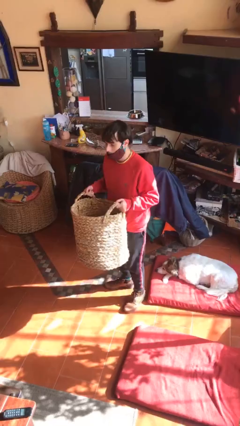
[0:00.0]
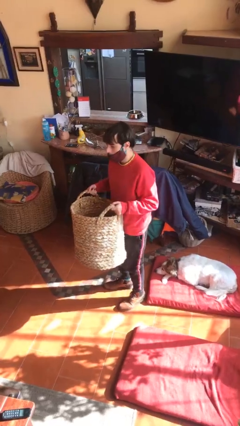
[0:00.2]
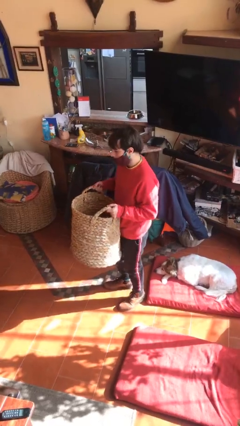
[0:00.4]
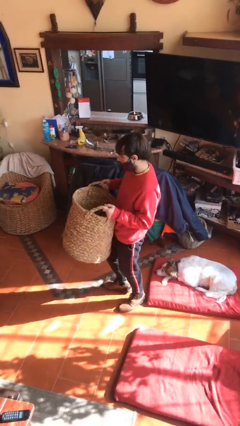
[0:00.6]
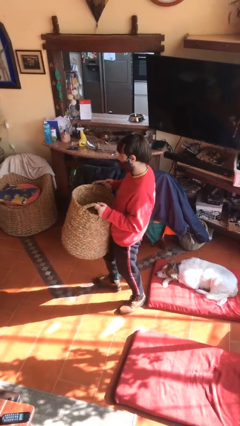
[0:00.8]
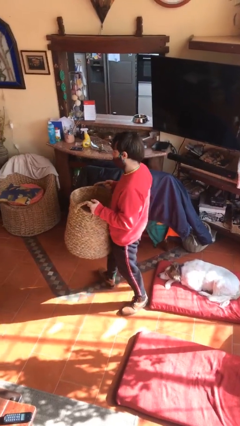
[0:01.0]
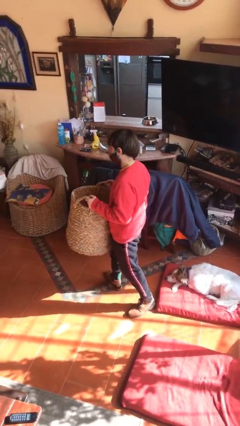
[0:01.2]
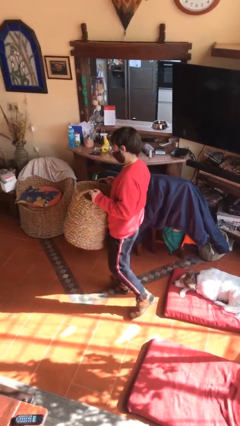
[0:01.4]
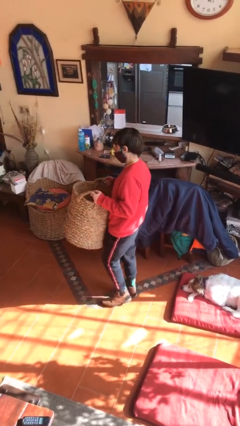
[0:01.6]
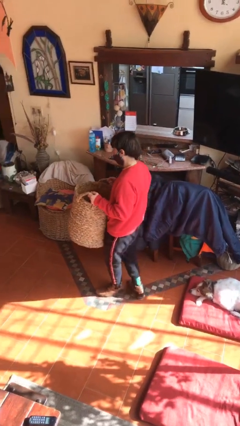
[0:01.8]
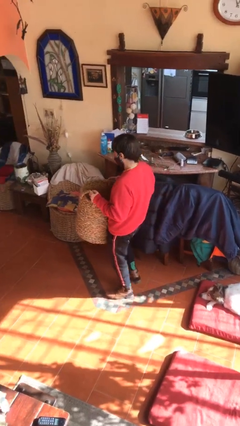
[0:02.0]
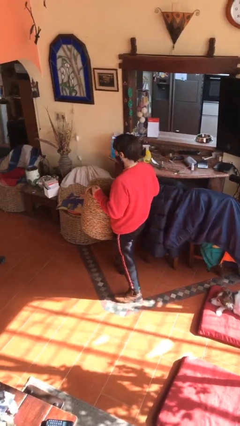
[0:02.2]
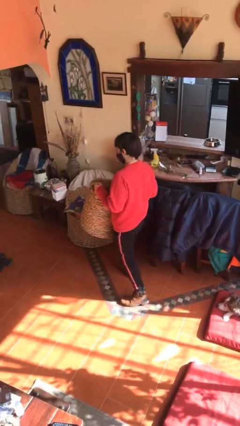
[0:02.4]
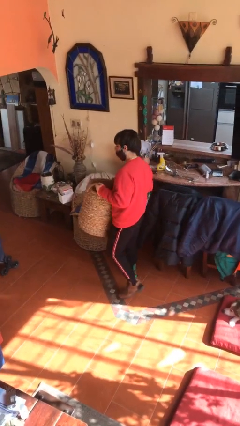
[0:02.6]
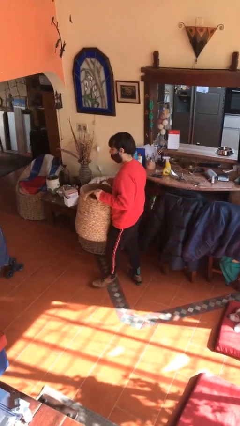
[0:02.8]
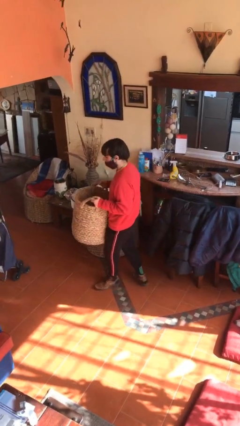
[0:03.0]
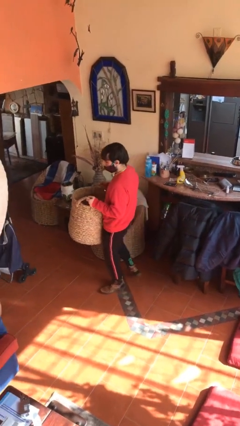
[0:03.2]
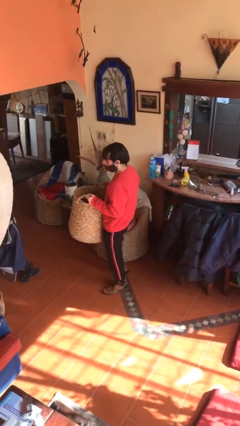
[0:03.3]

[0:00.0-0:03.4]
person carries laundry basket

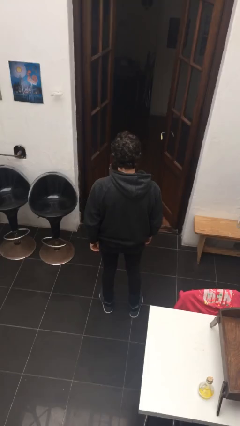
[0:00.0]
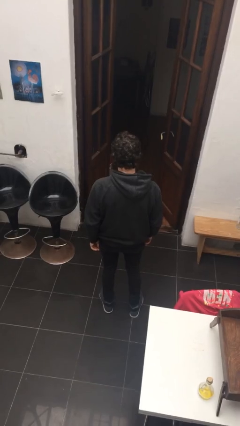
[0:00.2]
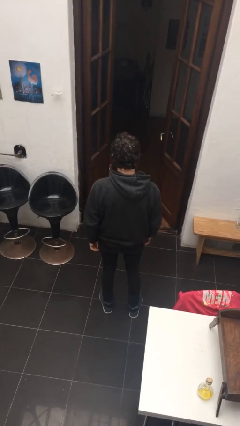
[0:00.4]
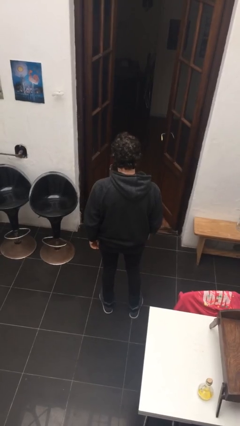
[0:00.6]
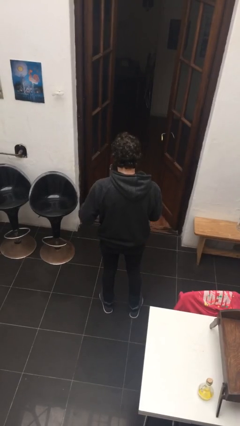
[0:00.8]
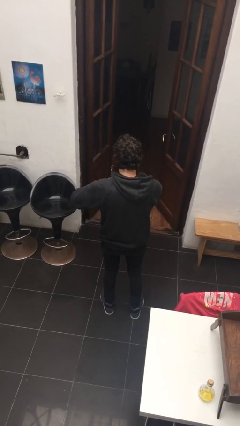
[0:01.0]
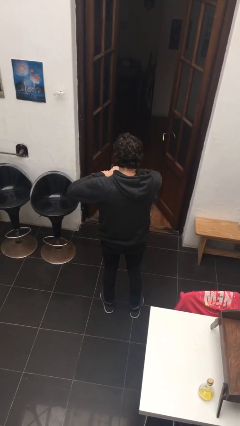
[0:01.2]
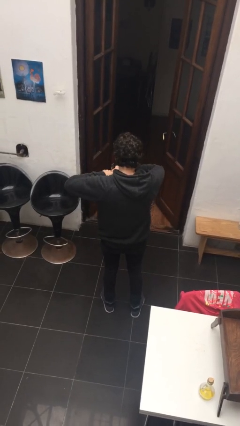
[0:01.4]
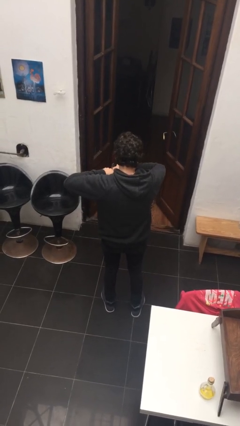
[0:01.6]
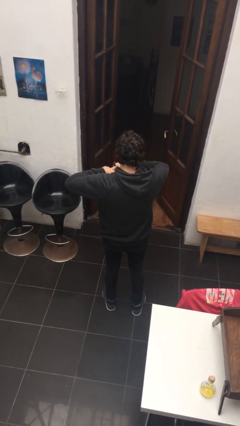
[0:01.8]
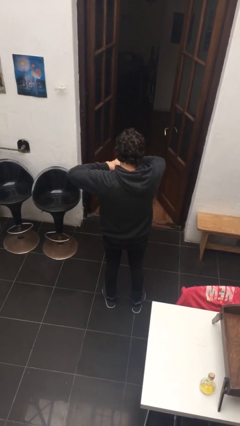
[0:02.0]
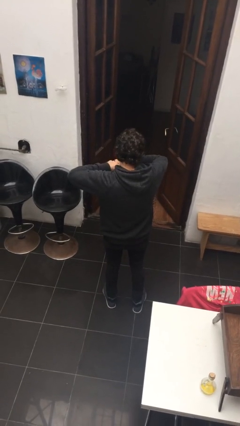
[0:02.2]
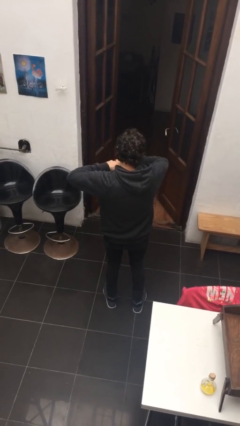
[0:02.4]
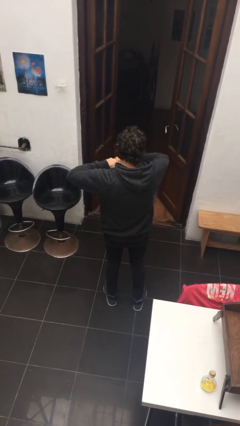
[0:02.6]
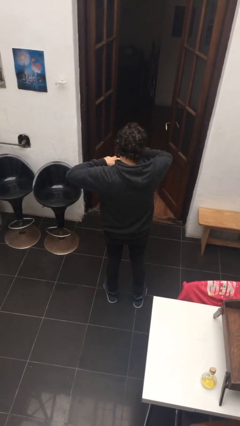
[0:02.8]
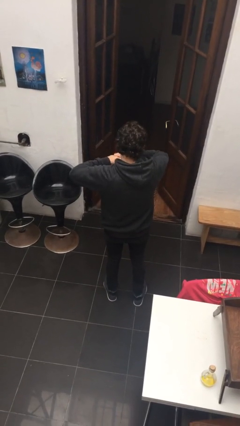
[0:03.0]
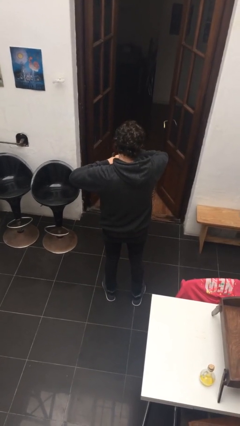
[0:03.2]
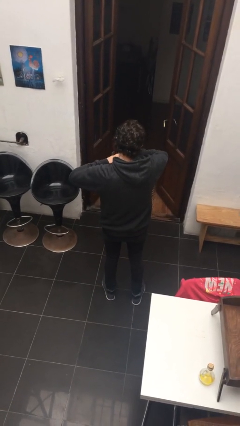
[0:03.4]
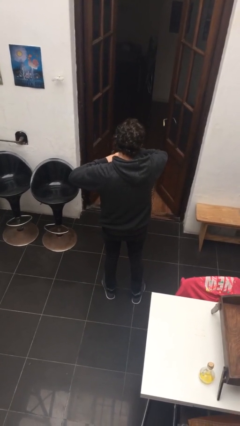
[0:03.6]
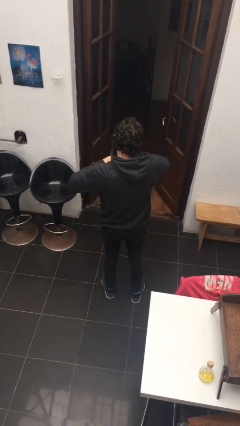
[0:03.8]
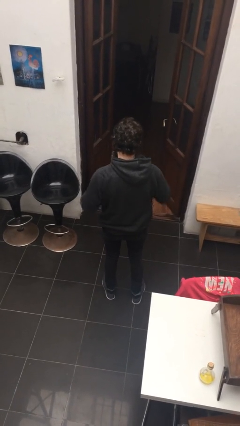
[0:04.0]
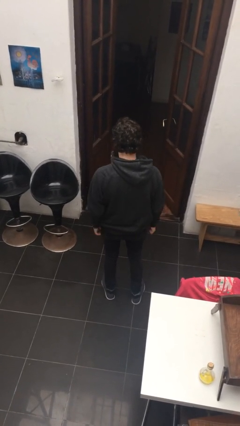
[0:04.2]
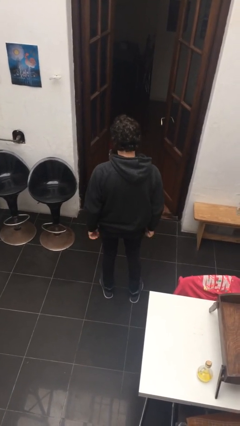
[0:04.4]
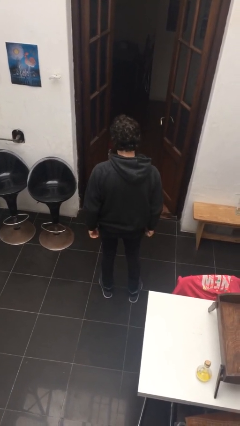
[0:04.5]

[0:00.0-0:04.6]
person cracks knuckles

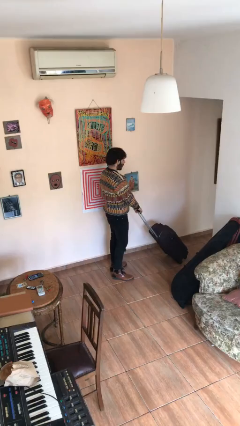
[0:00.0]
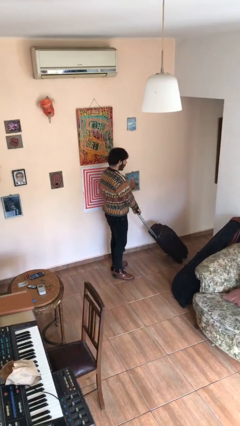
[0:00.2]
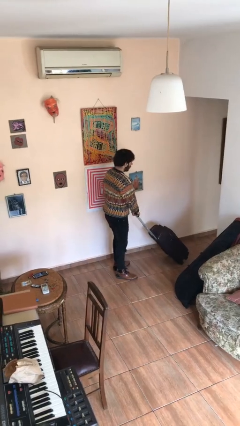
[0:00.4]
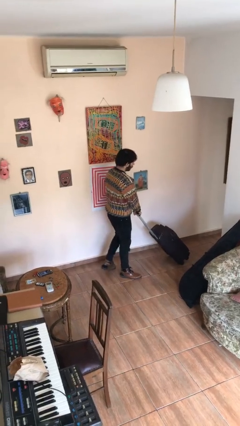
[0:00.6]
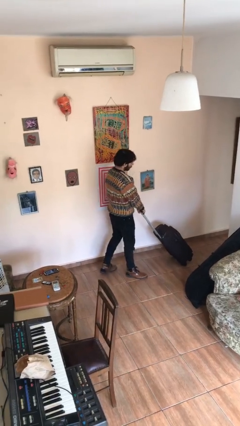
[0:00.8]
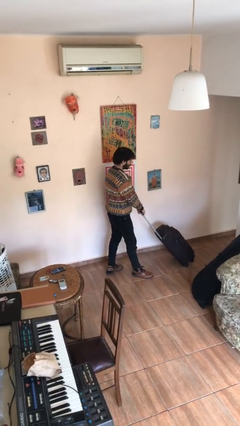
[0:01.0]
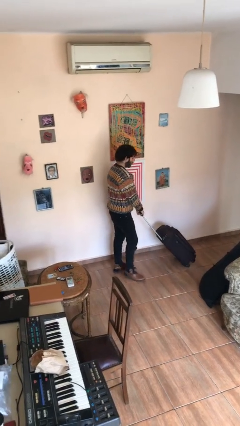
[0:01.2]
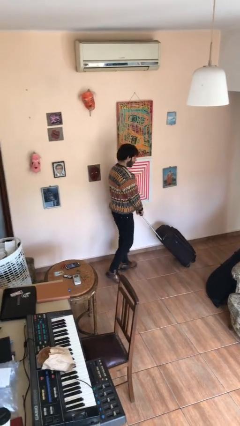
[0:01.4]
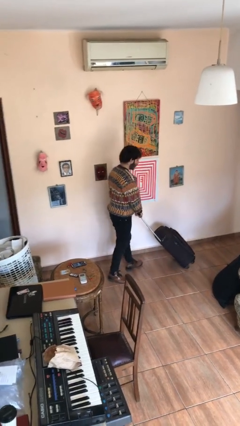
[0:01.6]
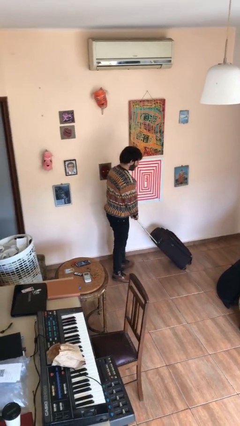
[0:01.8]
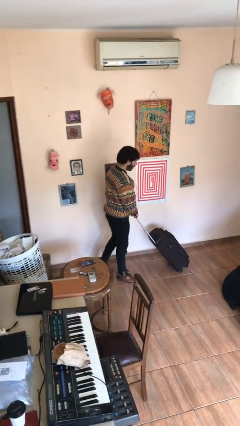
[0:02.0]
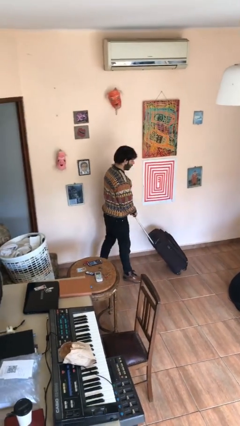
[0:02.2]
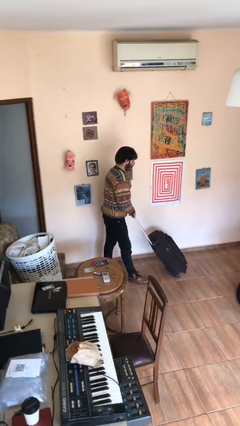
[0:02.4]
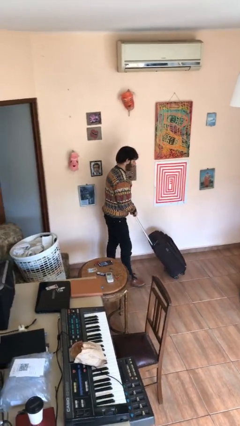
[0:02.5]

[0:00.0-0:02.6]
person pulls wheeled cart

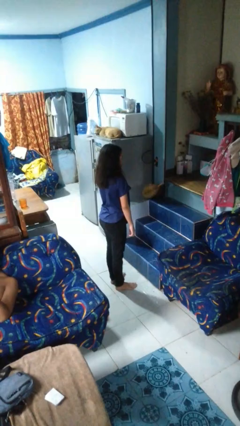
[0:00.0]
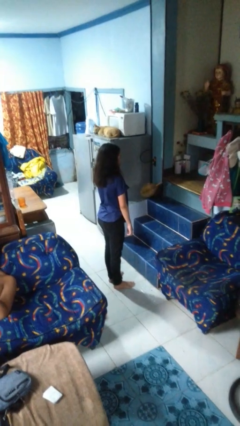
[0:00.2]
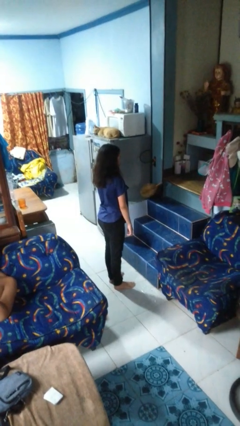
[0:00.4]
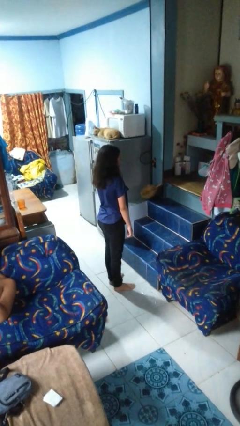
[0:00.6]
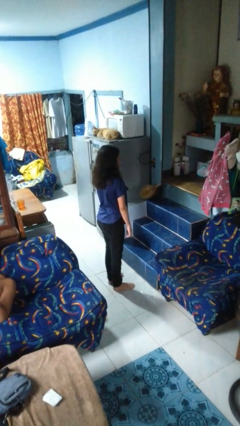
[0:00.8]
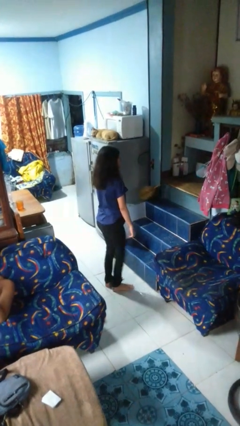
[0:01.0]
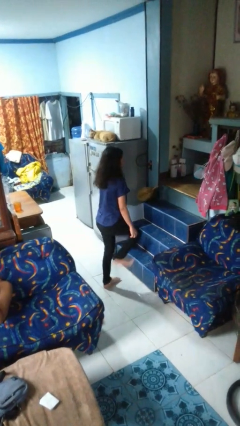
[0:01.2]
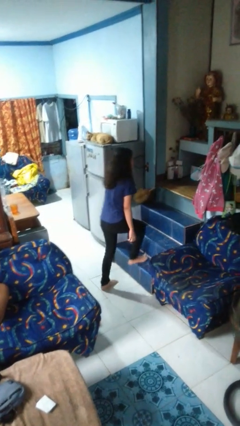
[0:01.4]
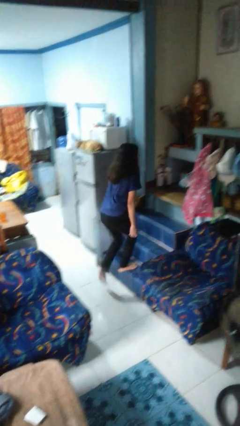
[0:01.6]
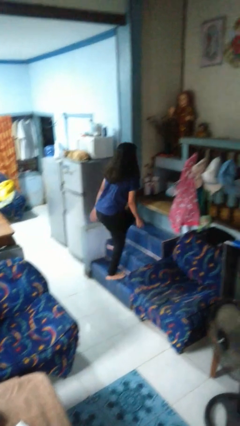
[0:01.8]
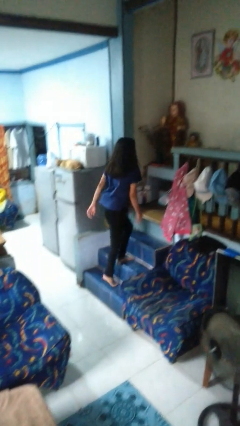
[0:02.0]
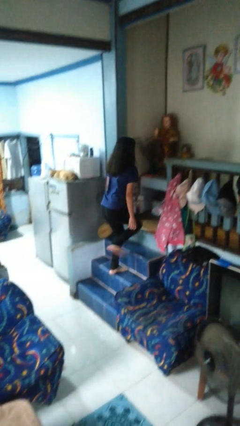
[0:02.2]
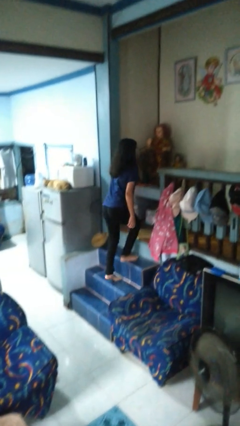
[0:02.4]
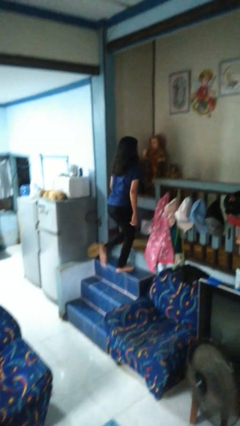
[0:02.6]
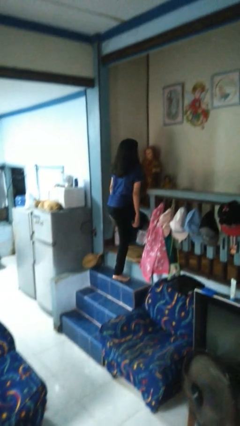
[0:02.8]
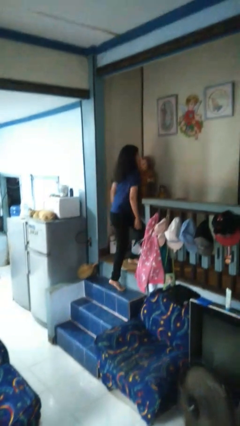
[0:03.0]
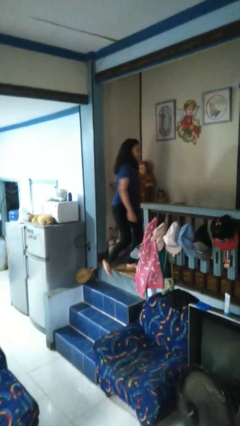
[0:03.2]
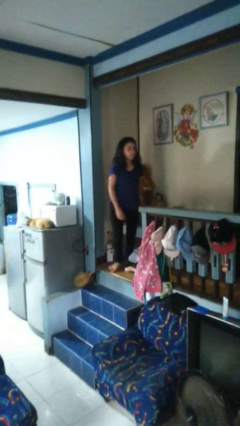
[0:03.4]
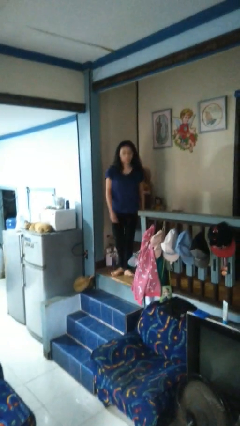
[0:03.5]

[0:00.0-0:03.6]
person climbs up stairs

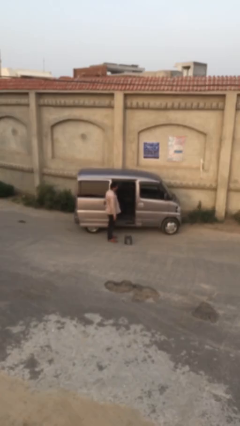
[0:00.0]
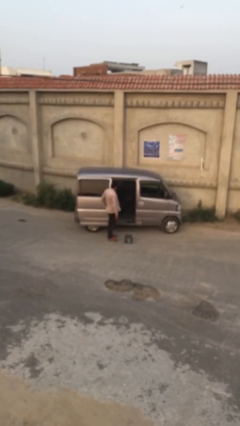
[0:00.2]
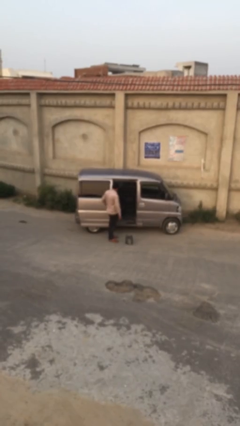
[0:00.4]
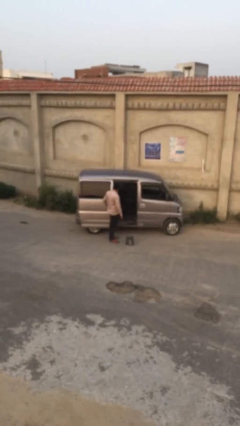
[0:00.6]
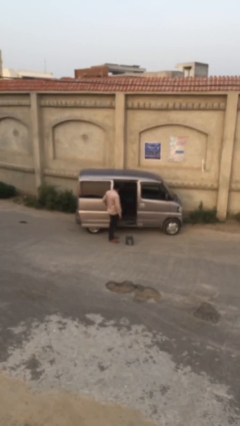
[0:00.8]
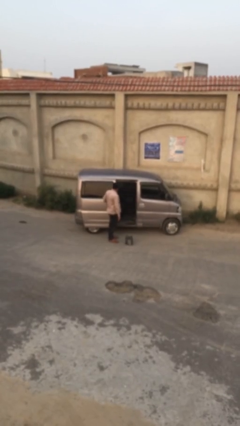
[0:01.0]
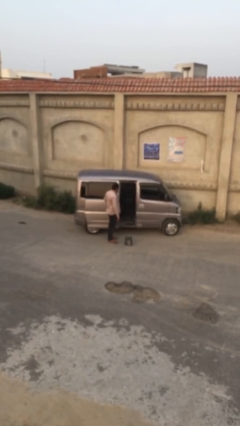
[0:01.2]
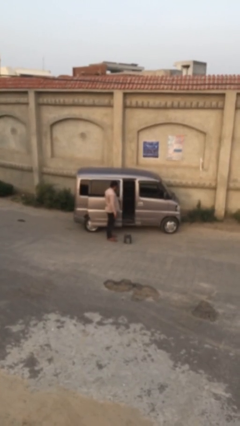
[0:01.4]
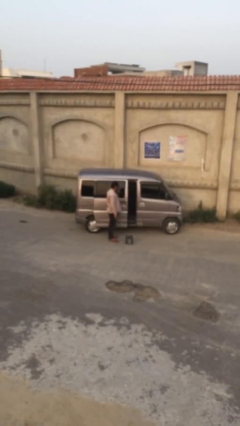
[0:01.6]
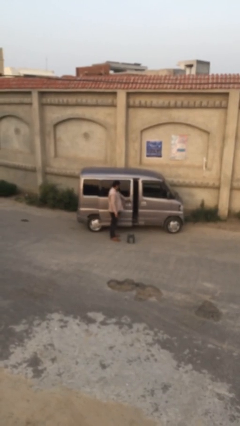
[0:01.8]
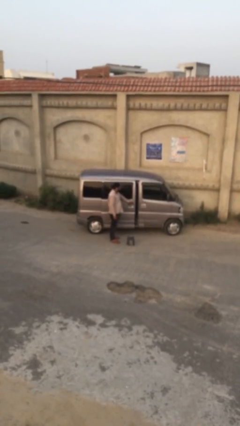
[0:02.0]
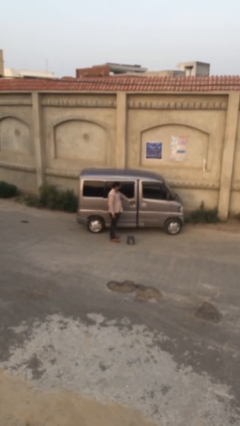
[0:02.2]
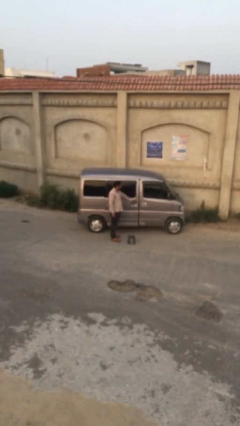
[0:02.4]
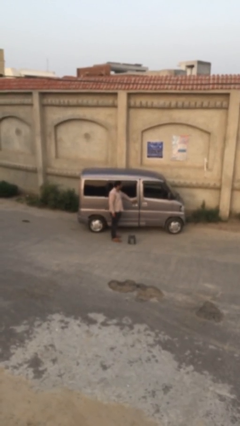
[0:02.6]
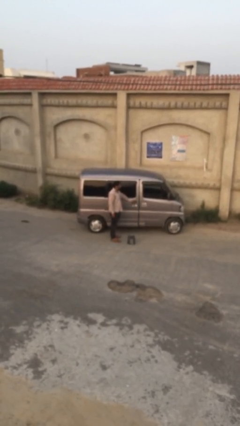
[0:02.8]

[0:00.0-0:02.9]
person closes car door

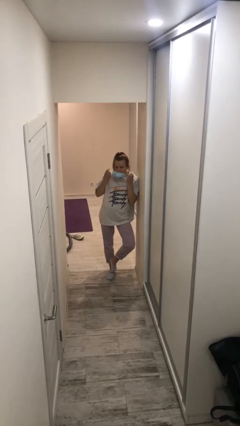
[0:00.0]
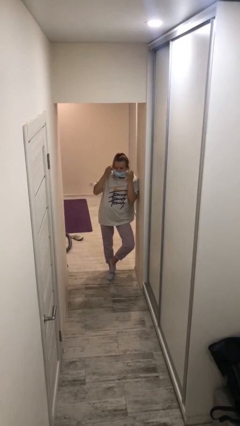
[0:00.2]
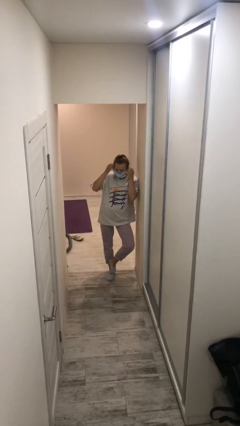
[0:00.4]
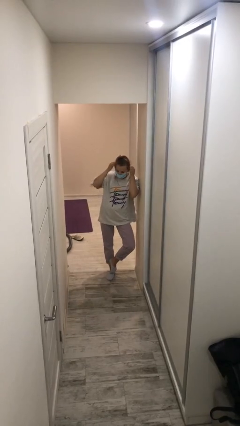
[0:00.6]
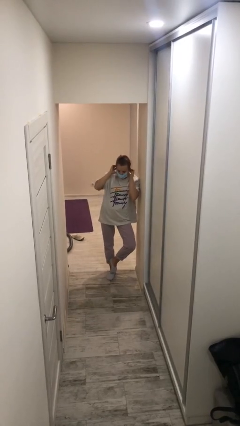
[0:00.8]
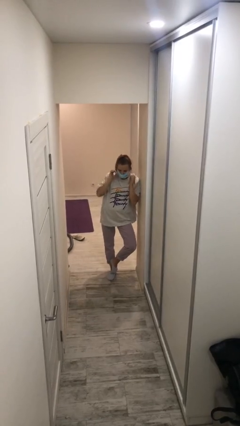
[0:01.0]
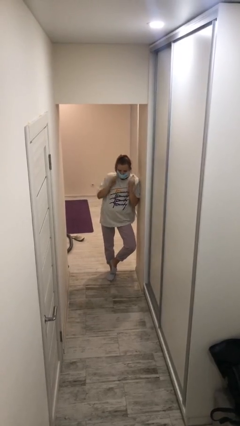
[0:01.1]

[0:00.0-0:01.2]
person puts on facemask
